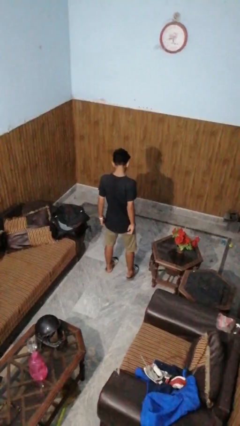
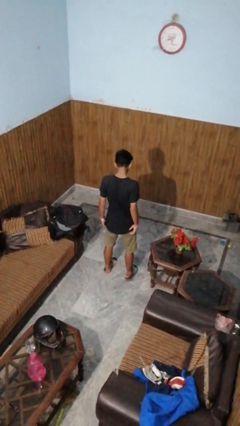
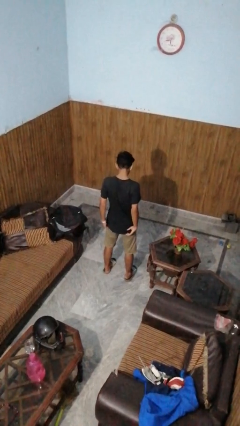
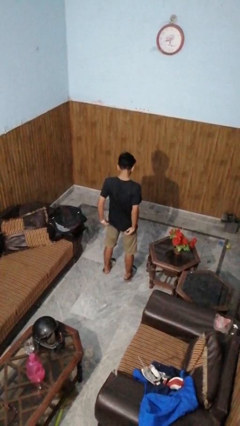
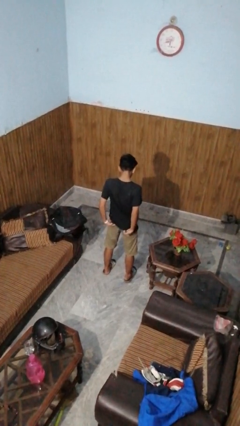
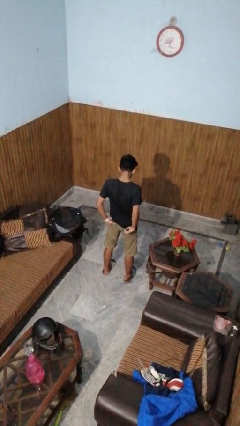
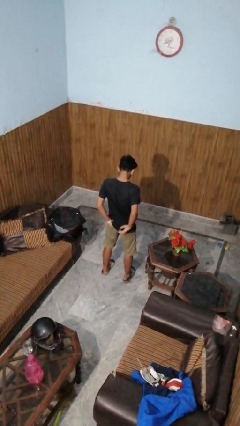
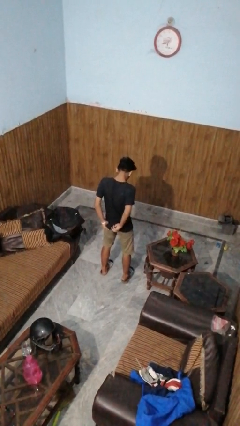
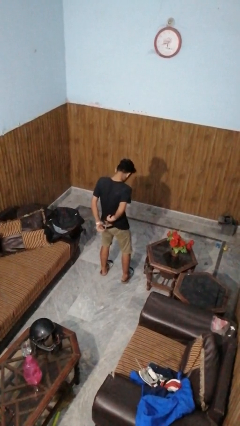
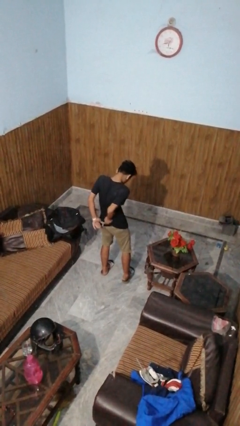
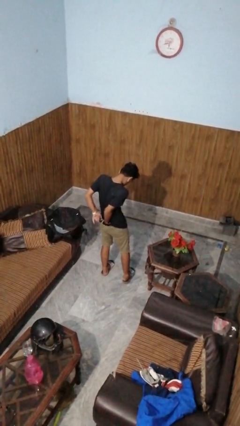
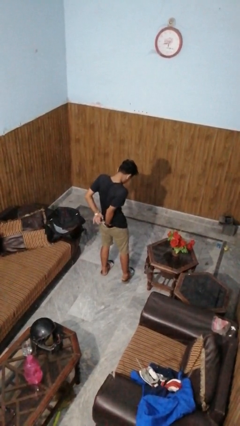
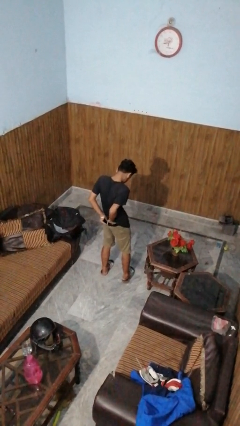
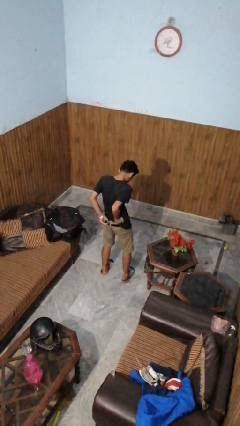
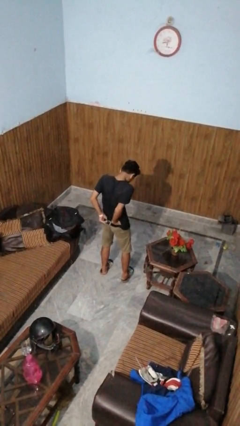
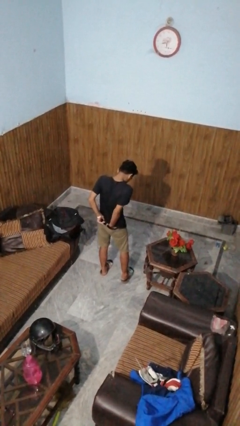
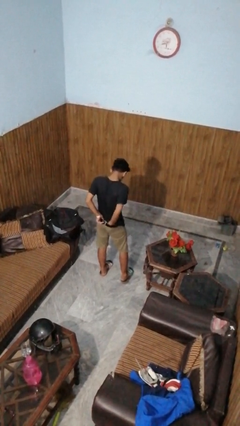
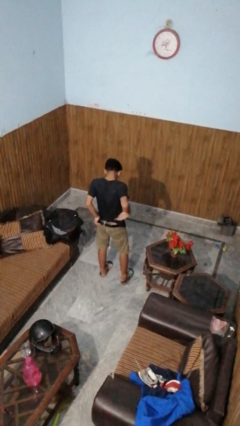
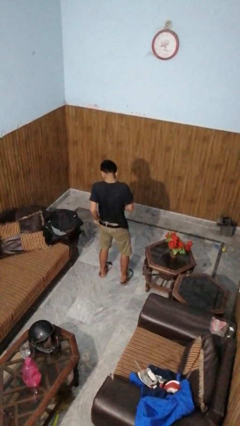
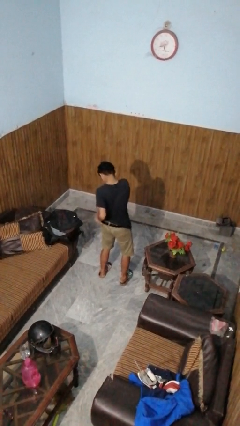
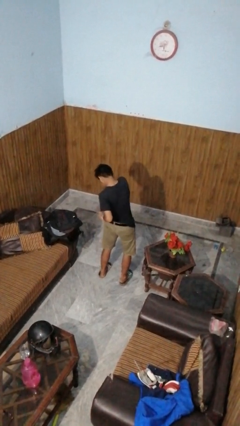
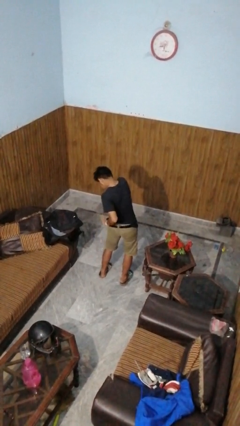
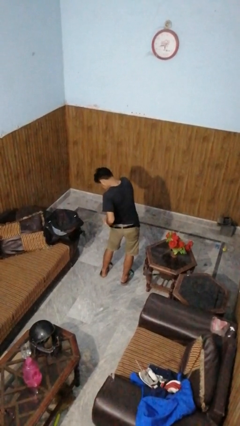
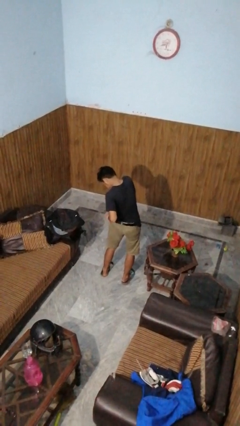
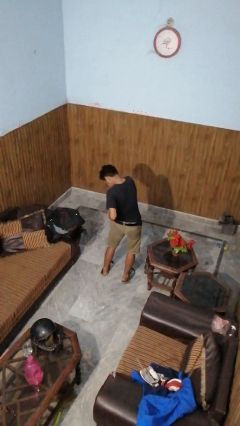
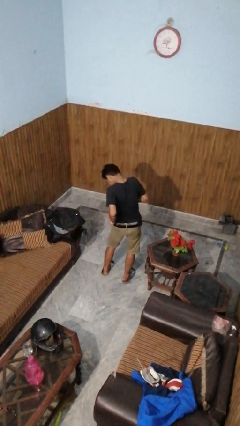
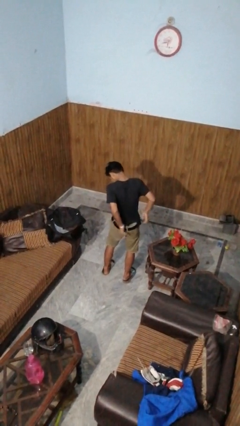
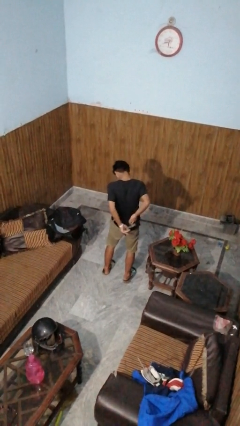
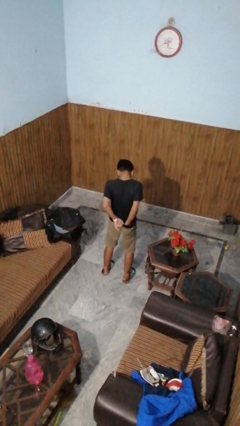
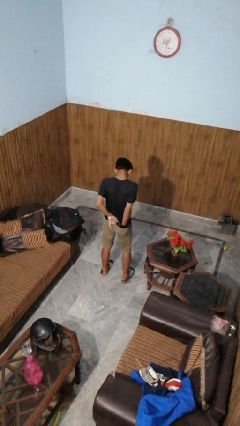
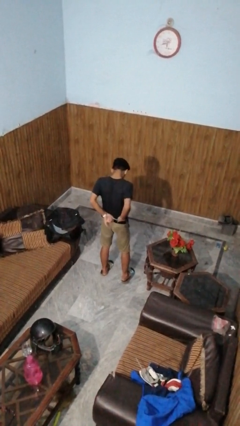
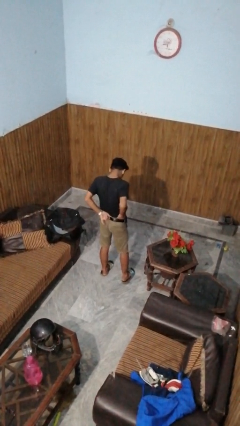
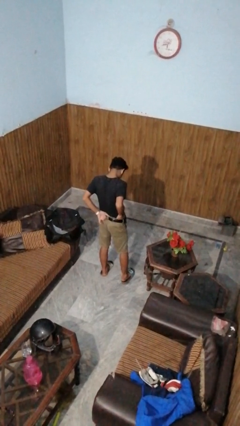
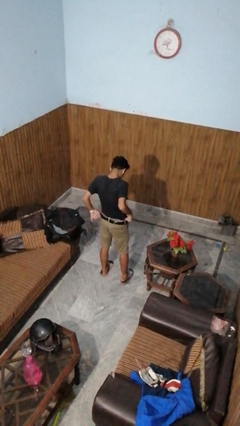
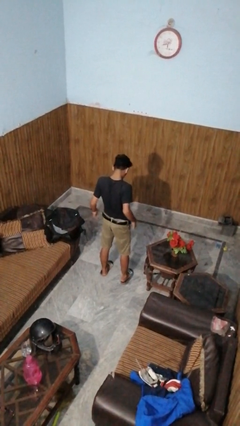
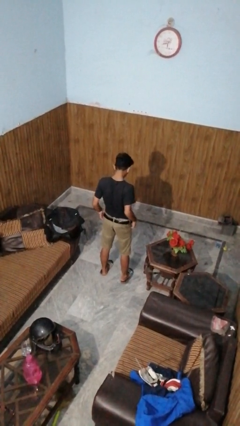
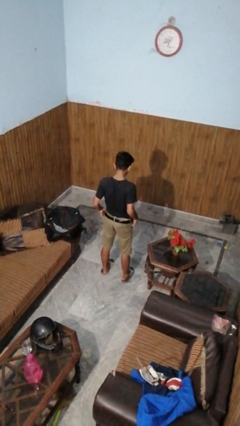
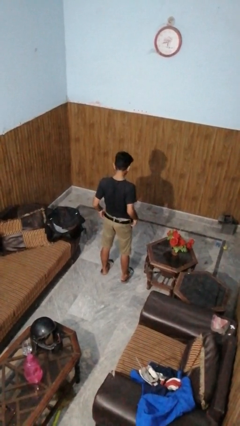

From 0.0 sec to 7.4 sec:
person tucks in shirt

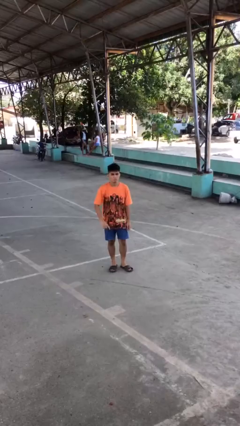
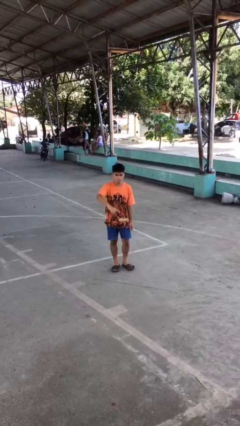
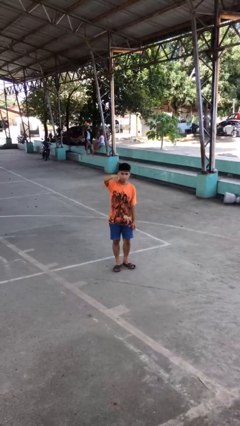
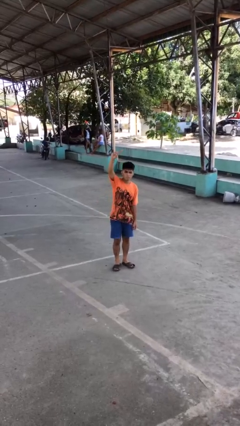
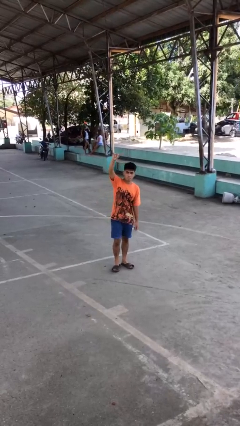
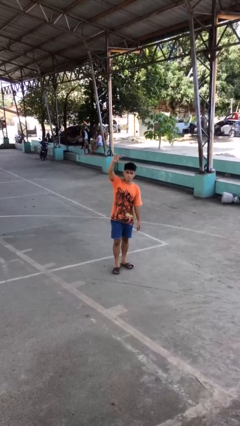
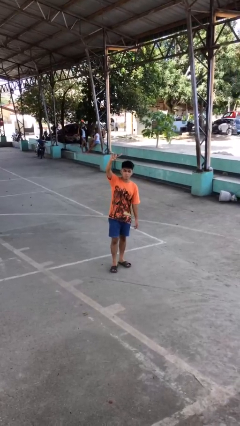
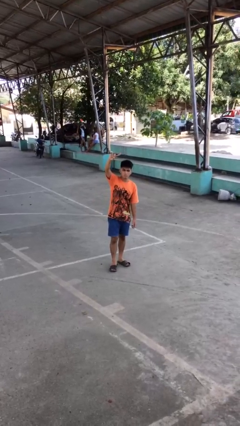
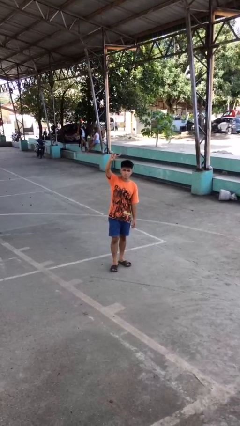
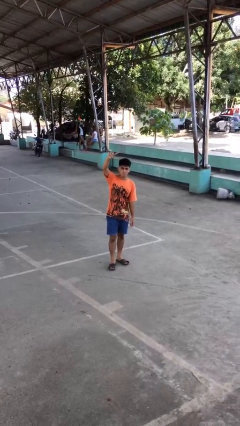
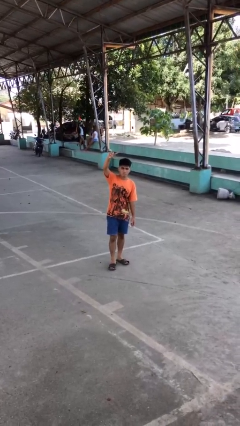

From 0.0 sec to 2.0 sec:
person gestures swipe up

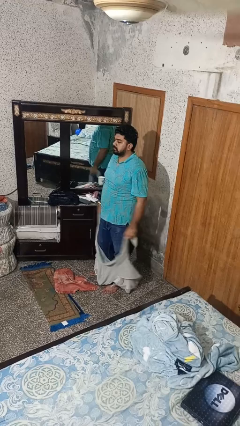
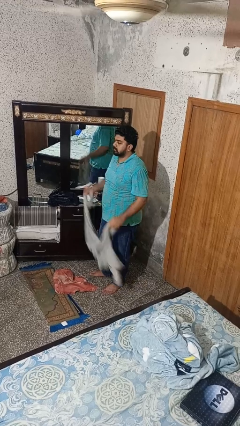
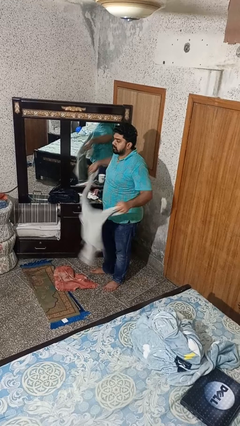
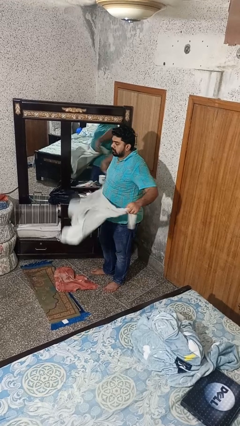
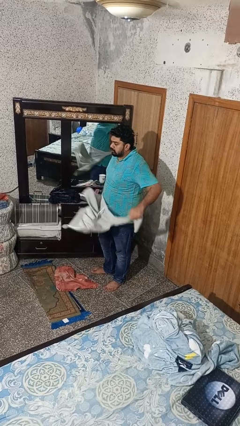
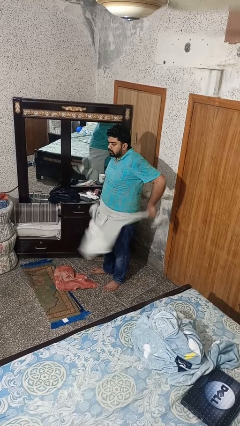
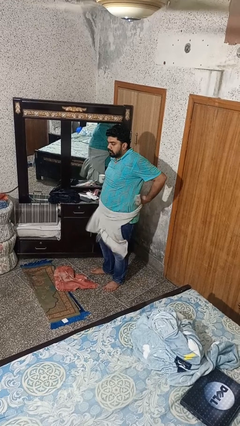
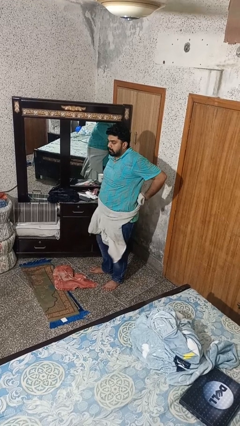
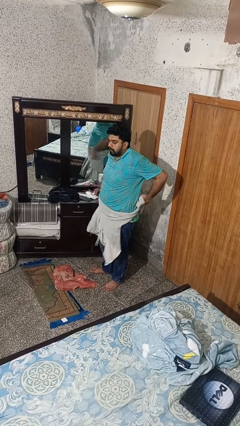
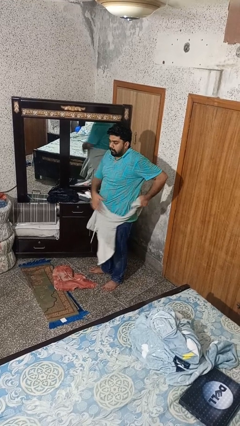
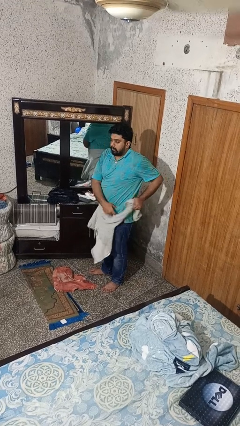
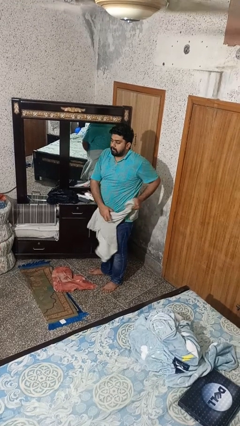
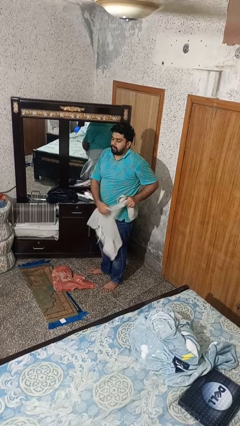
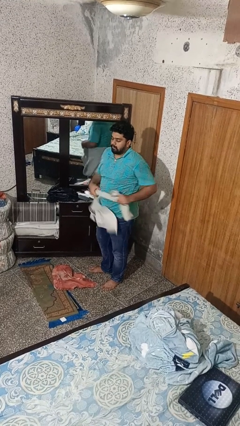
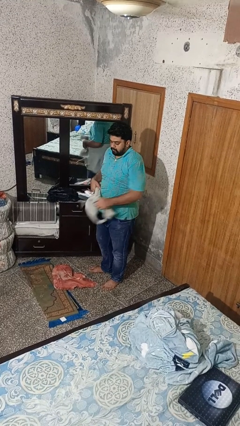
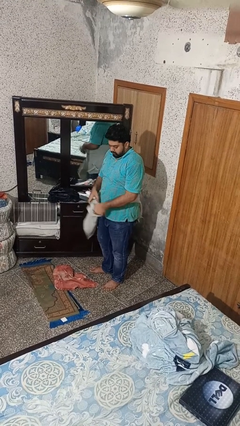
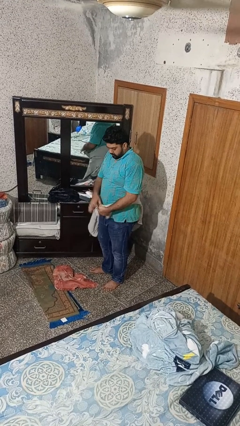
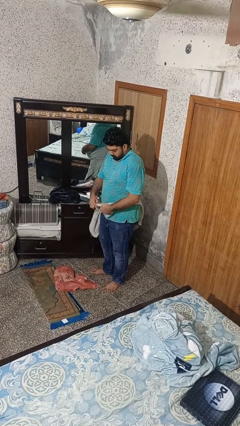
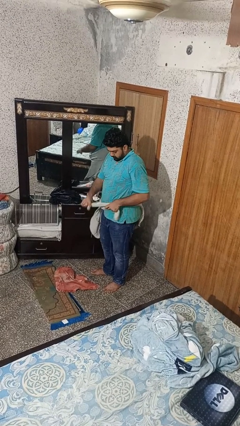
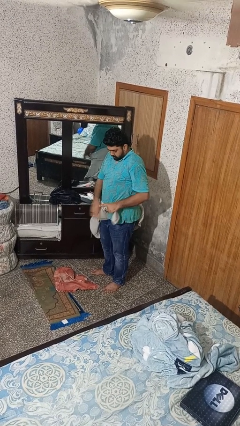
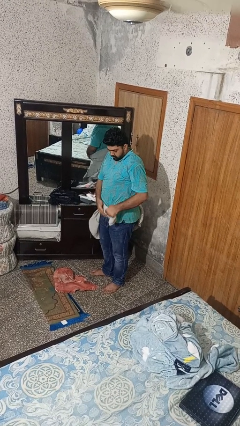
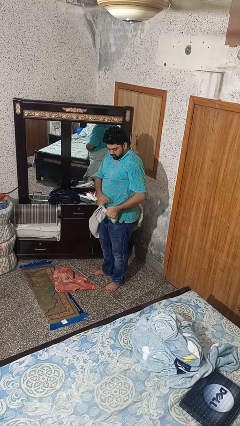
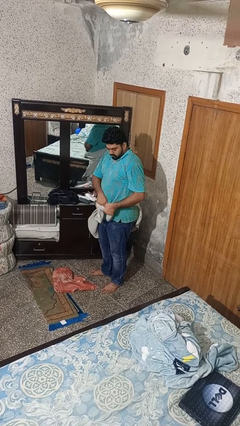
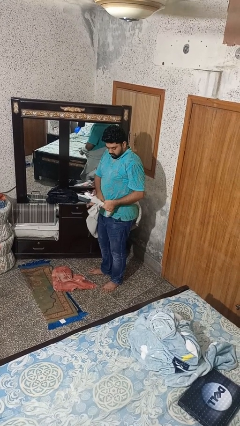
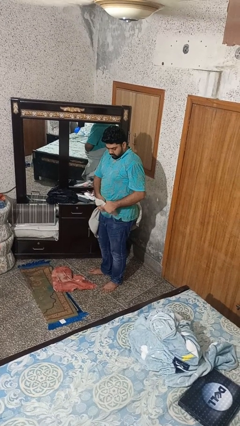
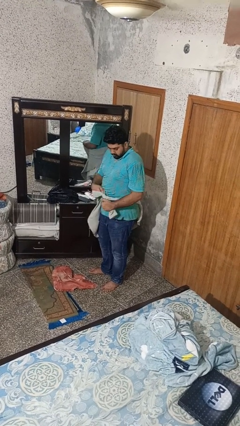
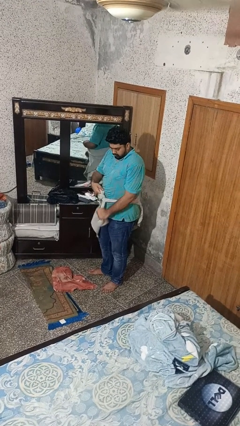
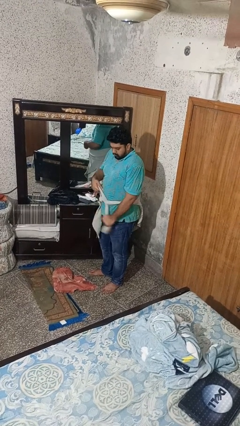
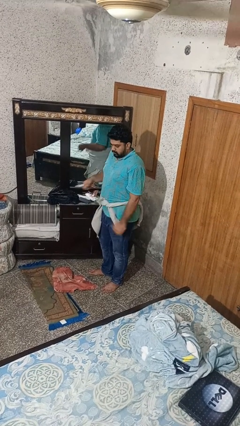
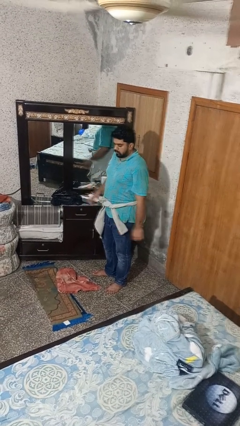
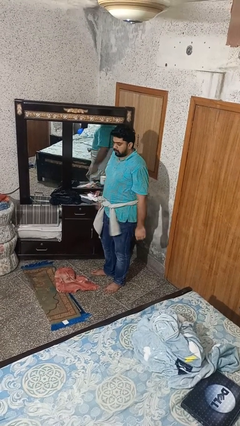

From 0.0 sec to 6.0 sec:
person ties jacket around waist

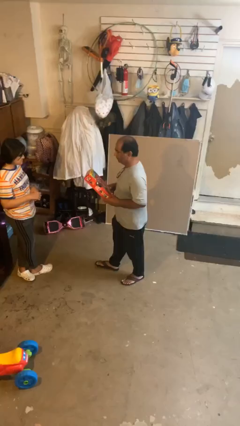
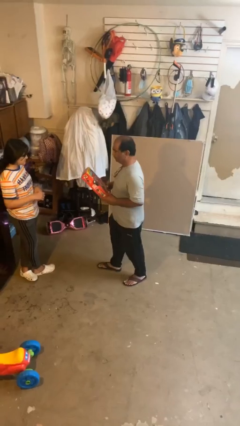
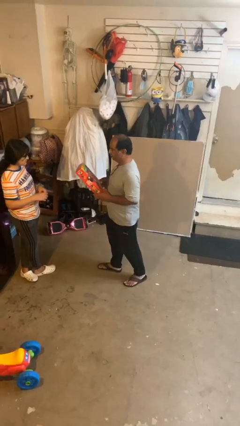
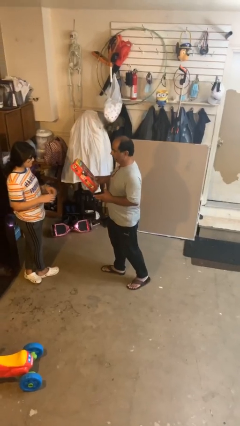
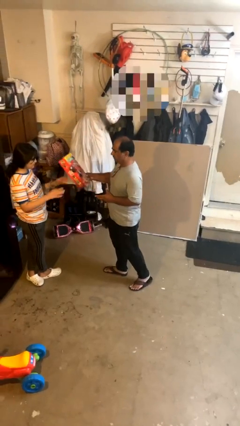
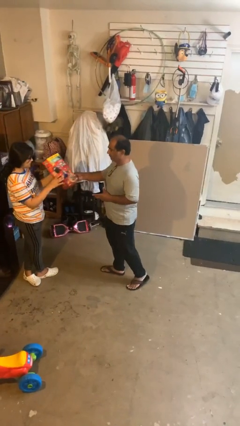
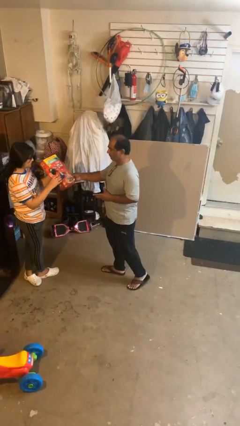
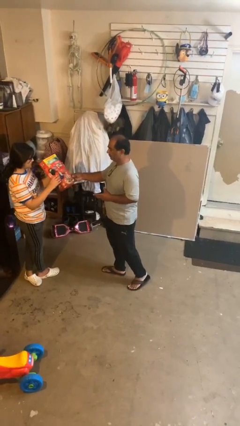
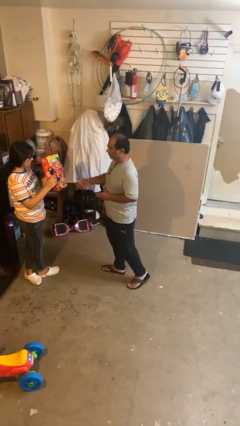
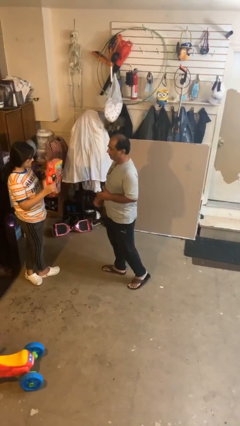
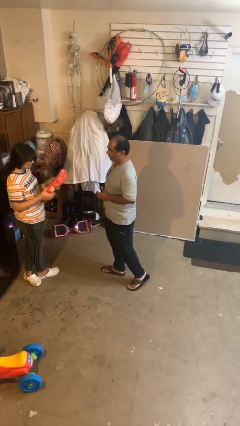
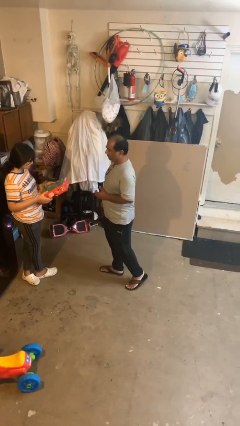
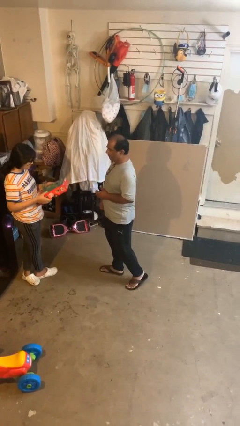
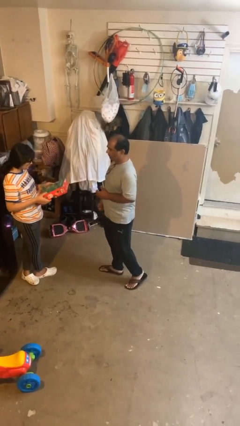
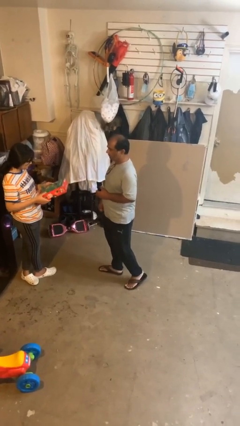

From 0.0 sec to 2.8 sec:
person transfers object to person
